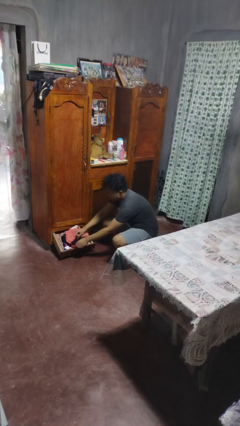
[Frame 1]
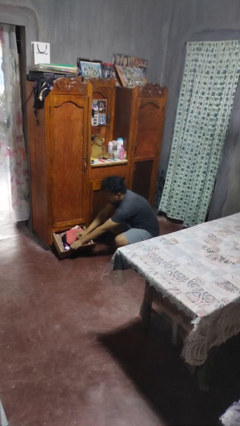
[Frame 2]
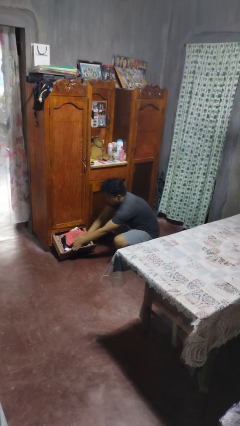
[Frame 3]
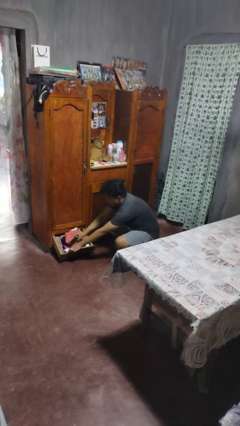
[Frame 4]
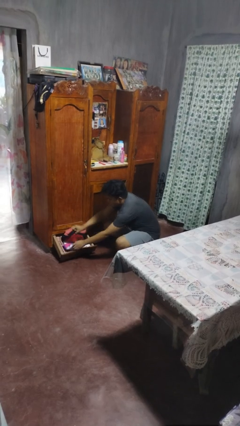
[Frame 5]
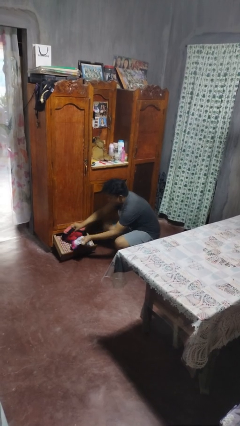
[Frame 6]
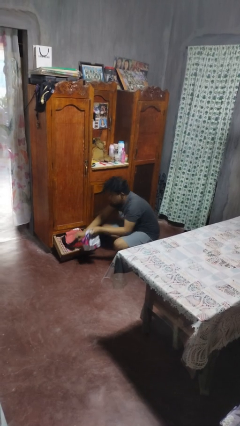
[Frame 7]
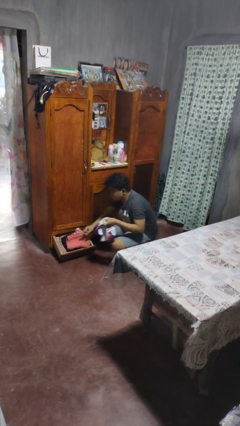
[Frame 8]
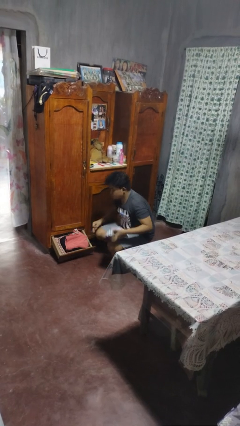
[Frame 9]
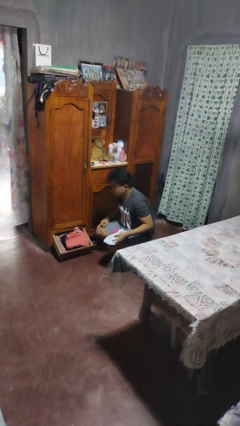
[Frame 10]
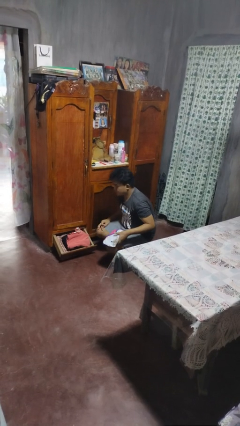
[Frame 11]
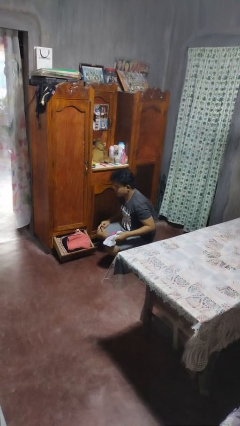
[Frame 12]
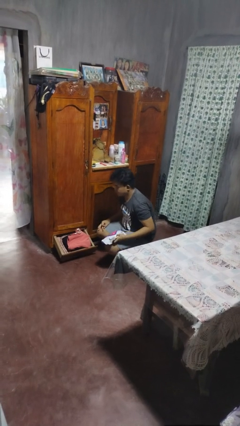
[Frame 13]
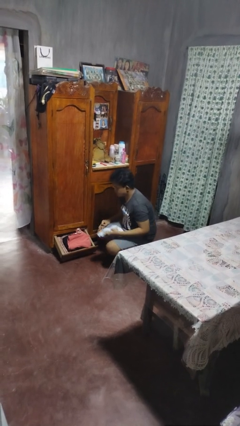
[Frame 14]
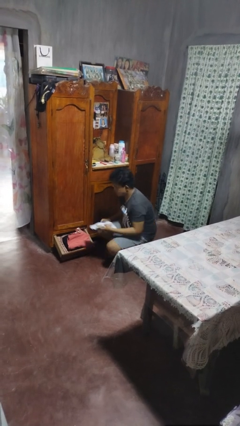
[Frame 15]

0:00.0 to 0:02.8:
person takes clothes from dresser

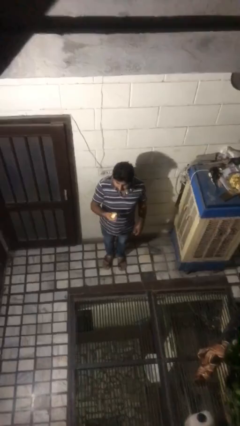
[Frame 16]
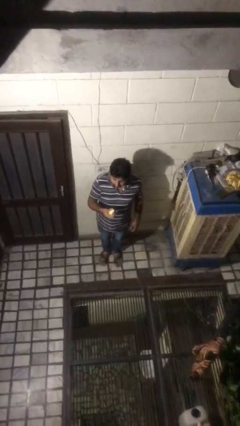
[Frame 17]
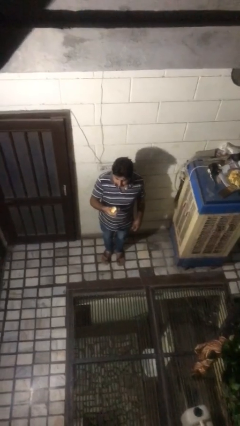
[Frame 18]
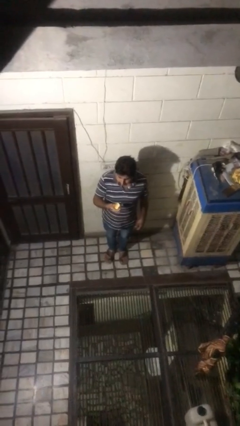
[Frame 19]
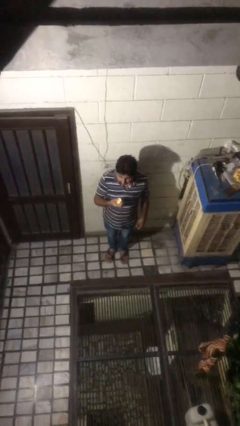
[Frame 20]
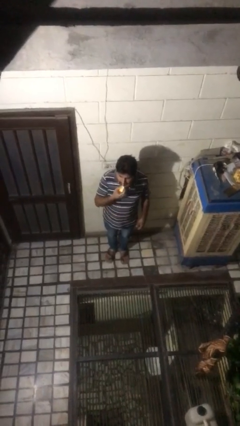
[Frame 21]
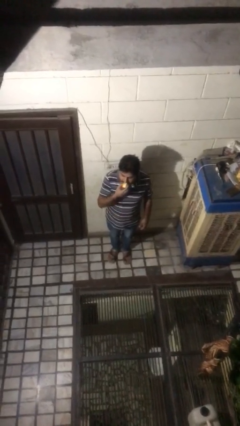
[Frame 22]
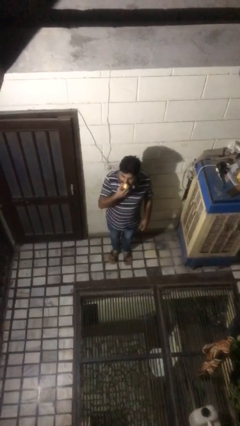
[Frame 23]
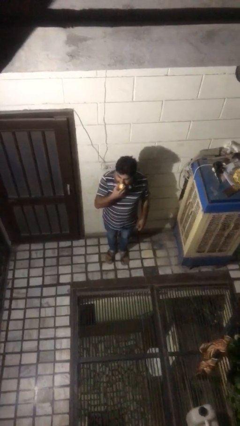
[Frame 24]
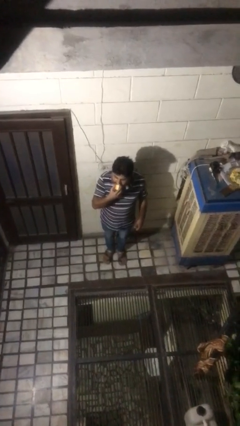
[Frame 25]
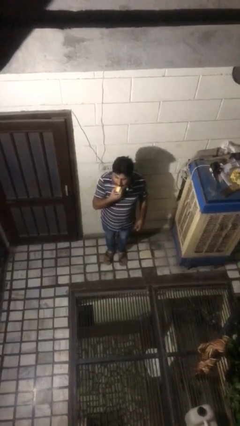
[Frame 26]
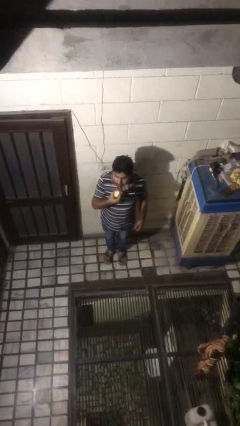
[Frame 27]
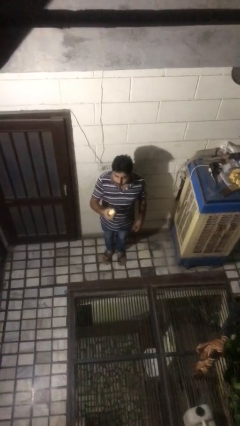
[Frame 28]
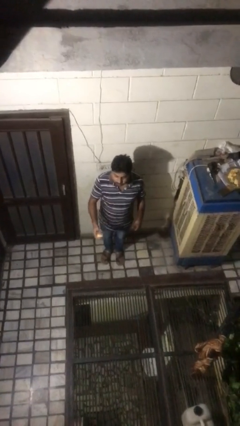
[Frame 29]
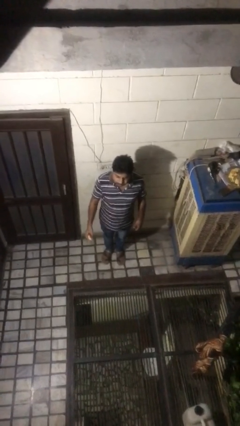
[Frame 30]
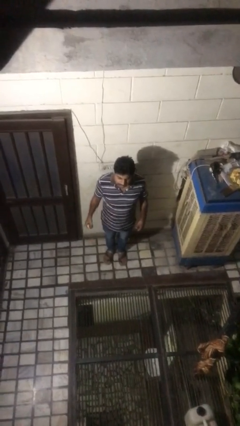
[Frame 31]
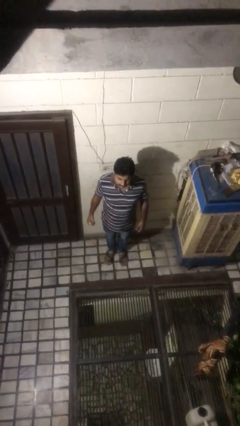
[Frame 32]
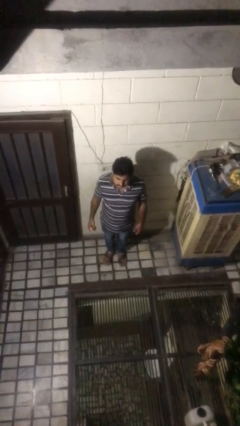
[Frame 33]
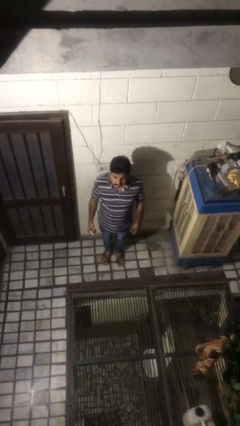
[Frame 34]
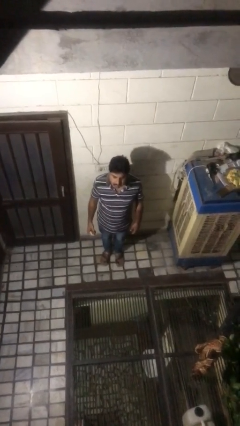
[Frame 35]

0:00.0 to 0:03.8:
person eats apple

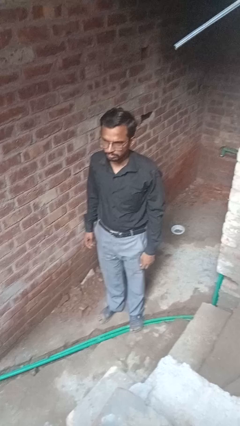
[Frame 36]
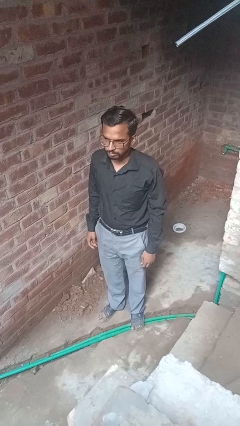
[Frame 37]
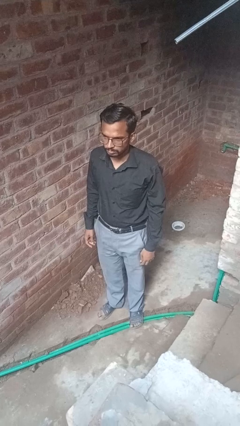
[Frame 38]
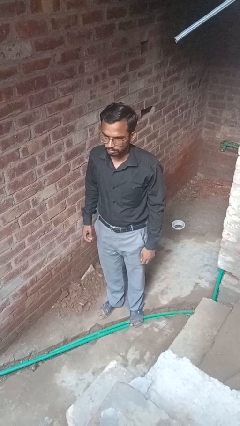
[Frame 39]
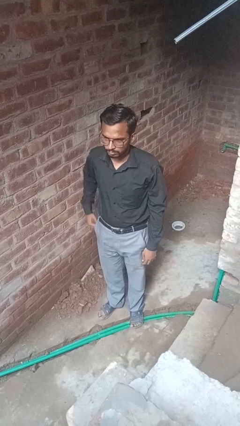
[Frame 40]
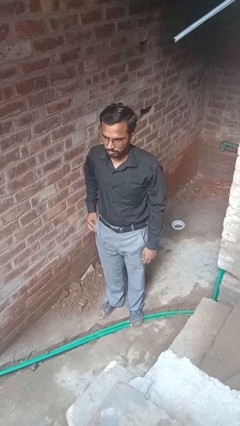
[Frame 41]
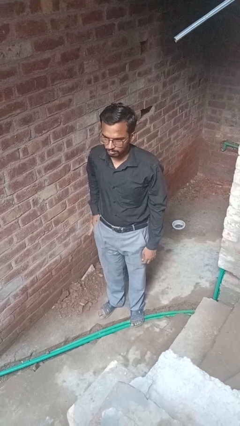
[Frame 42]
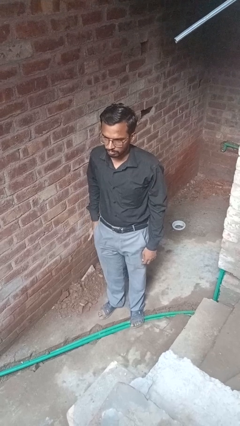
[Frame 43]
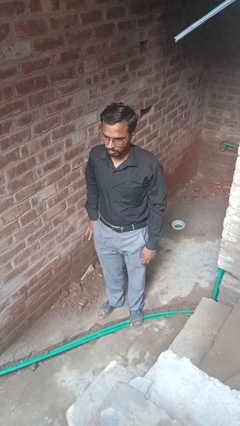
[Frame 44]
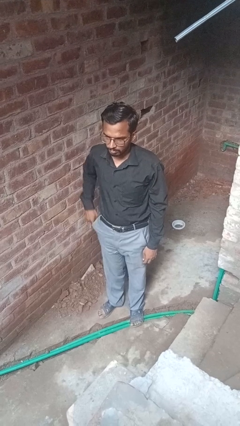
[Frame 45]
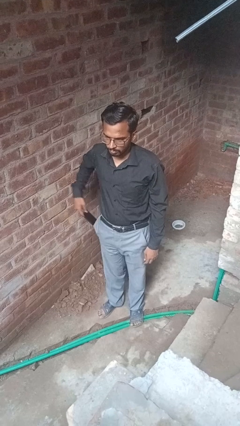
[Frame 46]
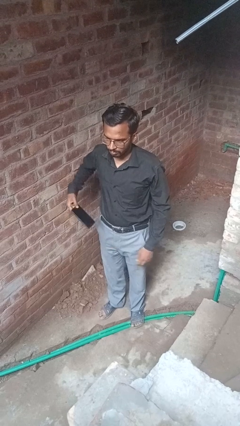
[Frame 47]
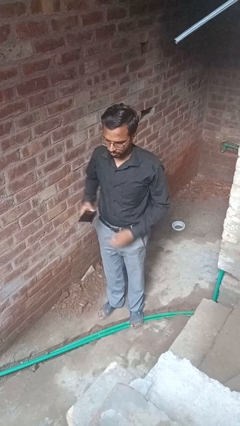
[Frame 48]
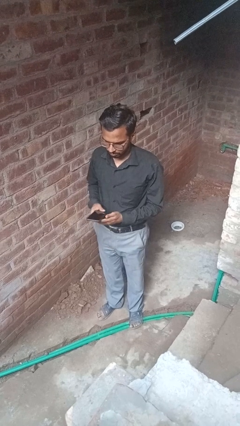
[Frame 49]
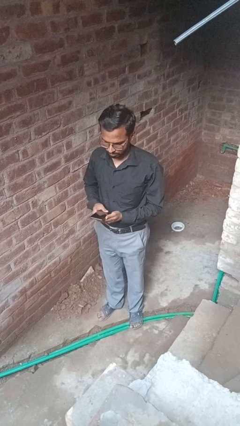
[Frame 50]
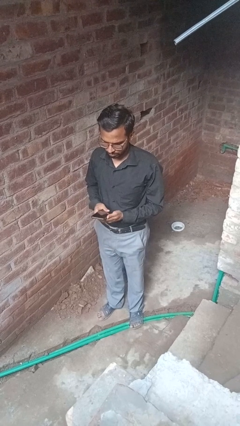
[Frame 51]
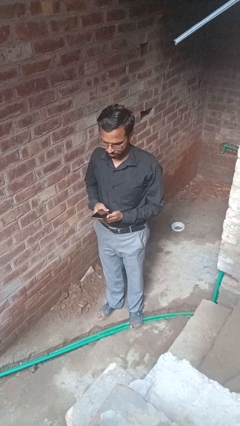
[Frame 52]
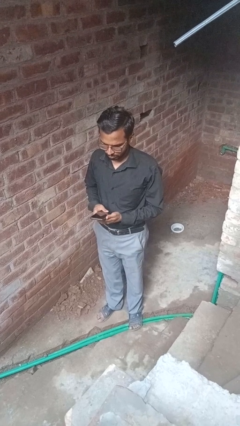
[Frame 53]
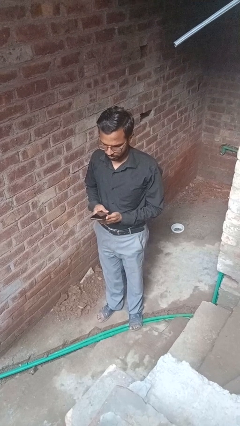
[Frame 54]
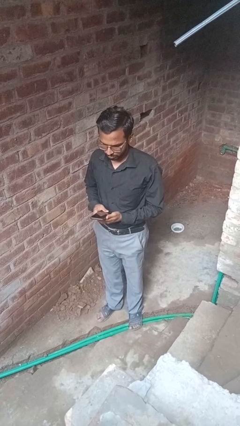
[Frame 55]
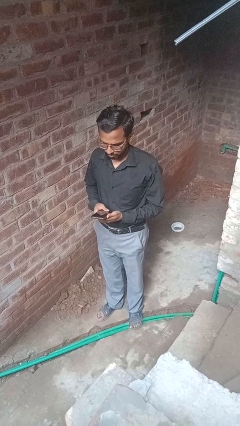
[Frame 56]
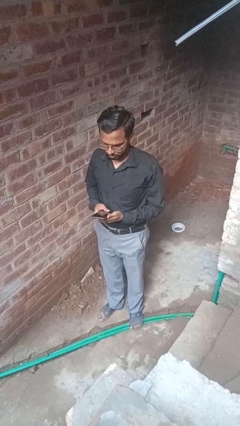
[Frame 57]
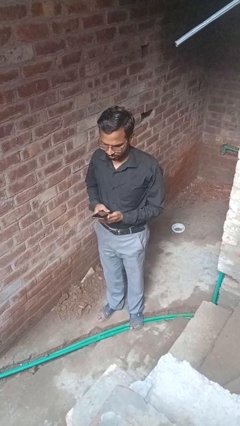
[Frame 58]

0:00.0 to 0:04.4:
person takes phone from pocket

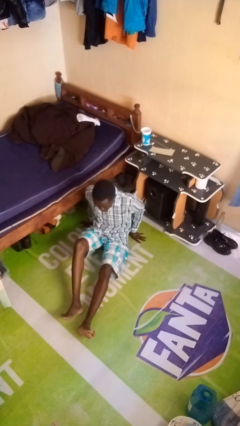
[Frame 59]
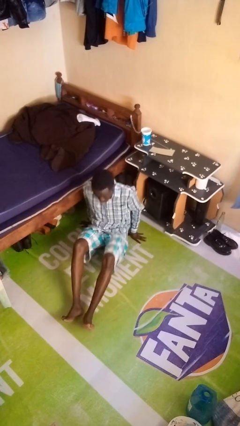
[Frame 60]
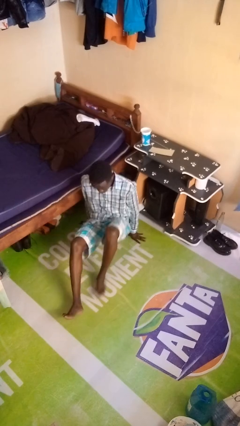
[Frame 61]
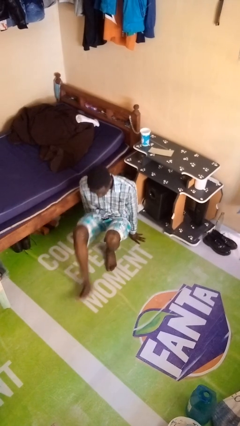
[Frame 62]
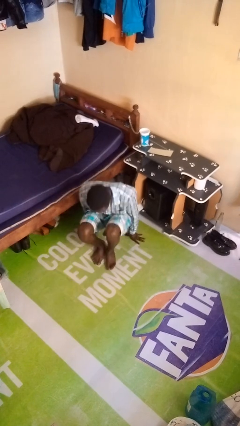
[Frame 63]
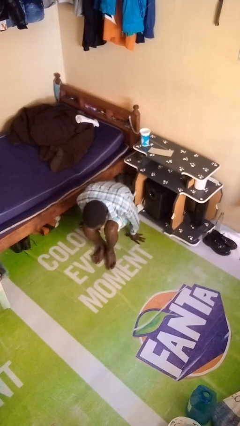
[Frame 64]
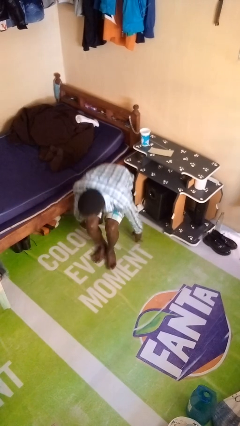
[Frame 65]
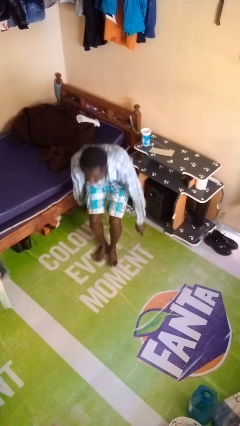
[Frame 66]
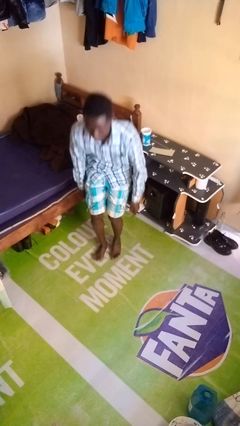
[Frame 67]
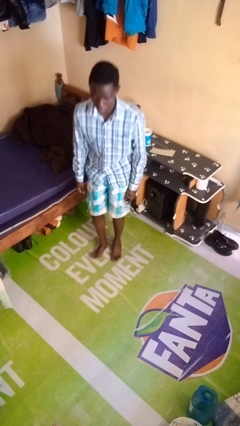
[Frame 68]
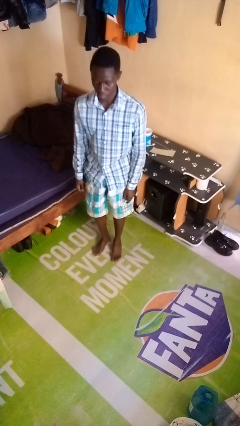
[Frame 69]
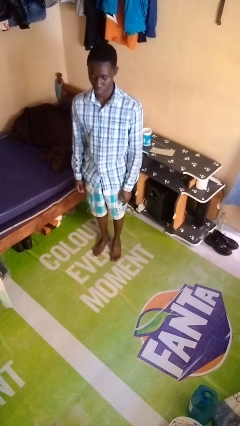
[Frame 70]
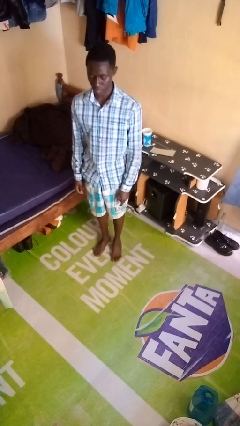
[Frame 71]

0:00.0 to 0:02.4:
person stands up from floor

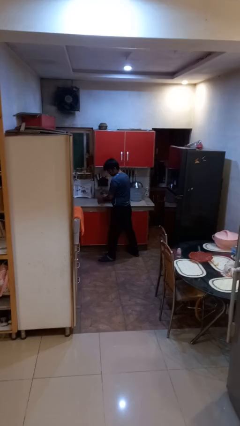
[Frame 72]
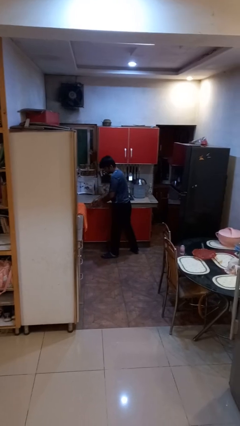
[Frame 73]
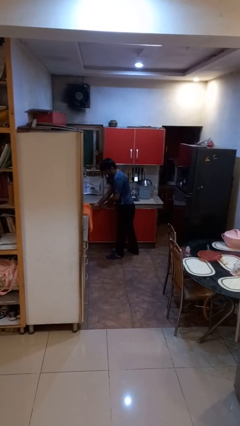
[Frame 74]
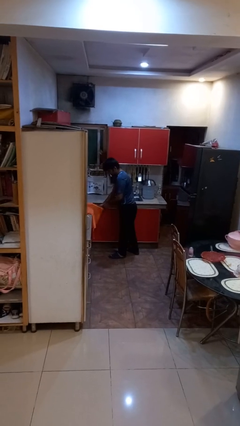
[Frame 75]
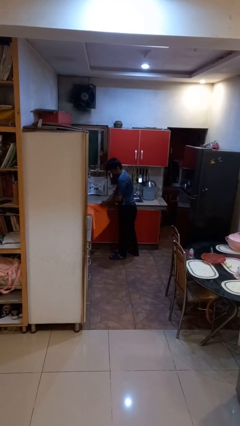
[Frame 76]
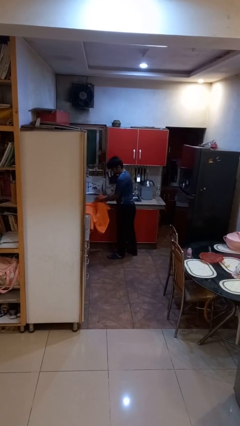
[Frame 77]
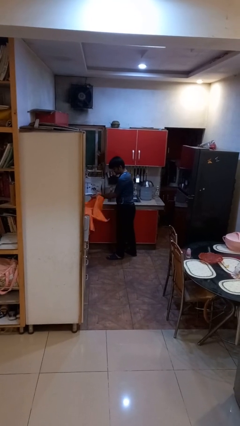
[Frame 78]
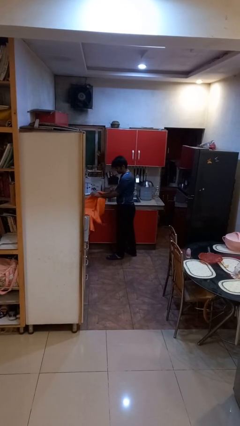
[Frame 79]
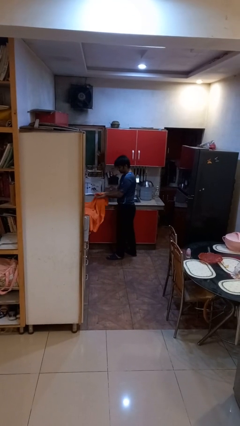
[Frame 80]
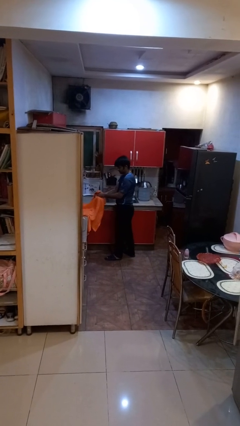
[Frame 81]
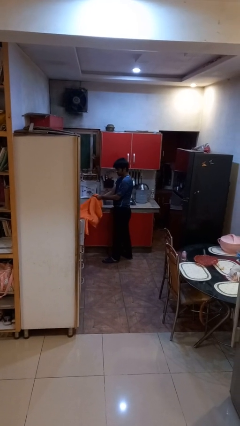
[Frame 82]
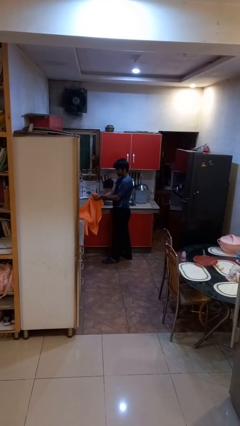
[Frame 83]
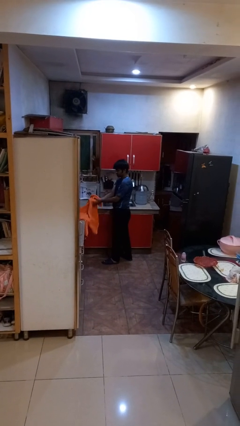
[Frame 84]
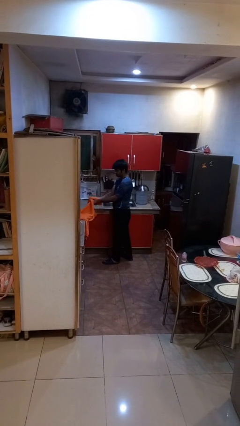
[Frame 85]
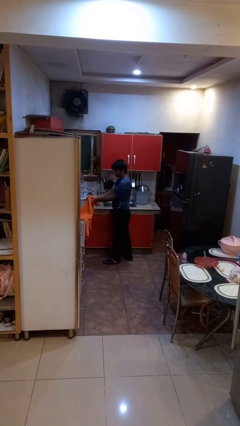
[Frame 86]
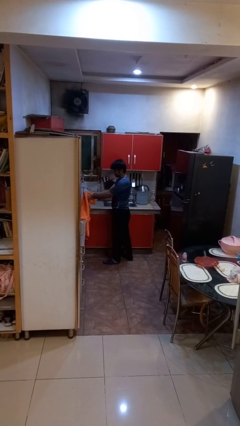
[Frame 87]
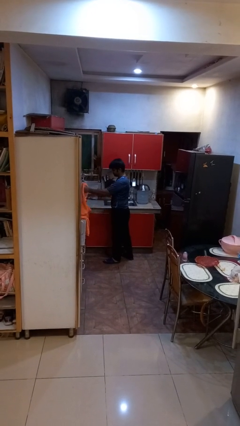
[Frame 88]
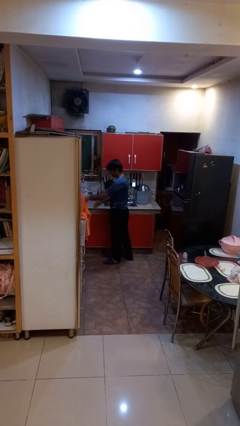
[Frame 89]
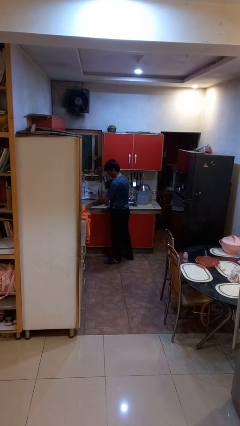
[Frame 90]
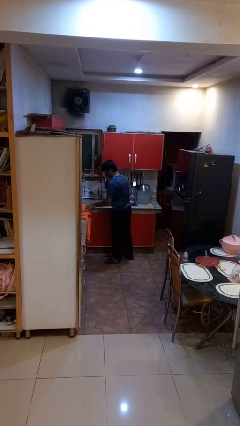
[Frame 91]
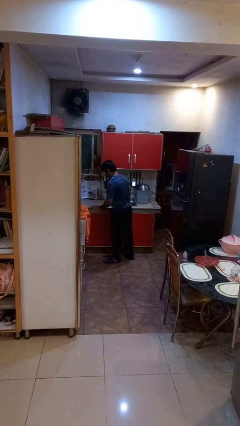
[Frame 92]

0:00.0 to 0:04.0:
person dries hands with towel

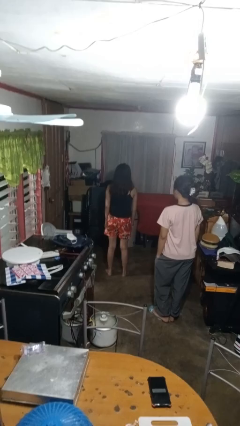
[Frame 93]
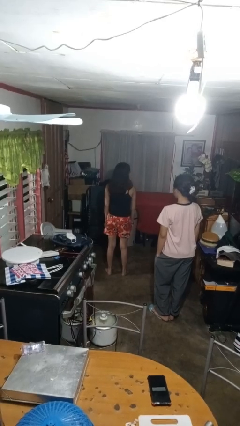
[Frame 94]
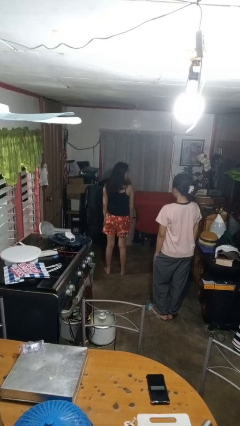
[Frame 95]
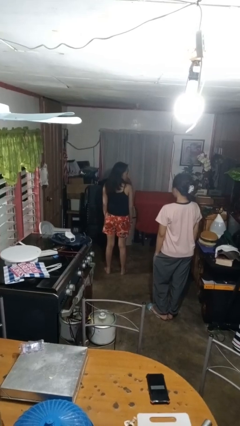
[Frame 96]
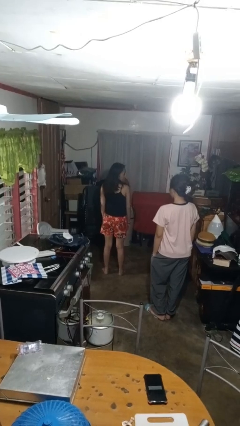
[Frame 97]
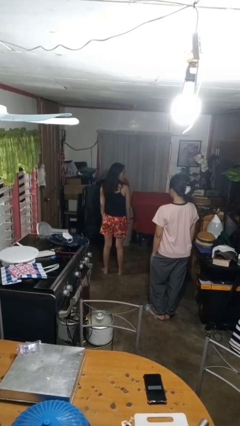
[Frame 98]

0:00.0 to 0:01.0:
person looks over shoulder
